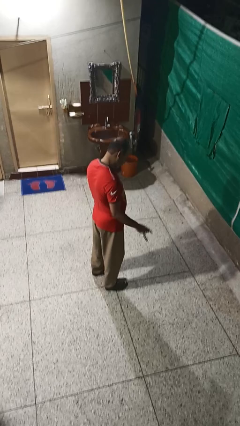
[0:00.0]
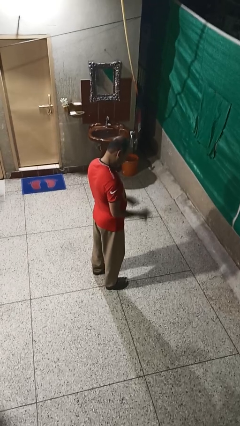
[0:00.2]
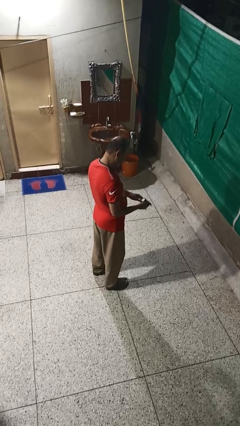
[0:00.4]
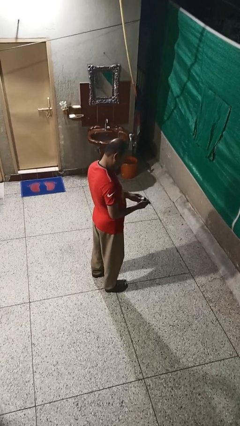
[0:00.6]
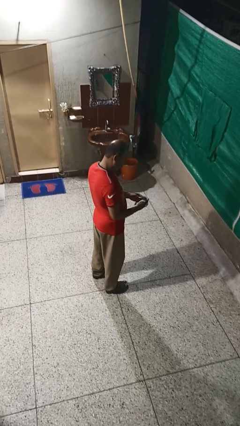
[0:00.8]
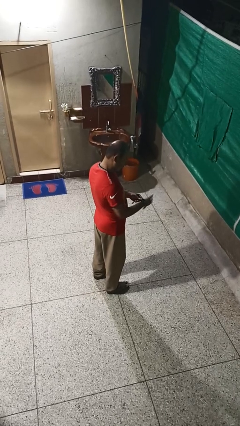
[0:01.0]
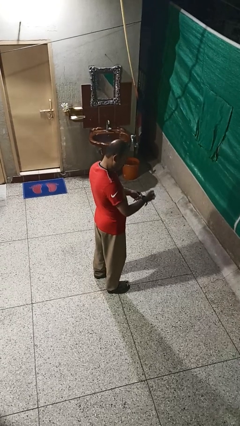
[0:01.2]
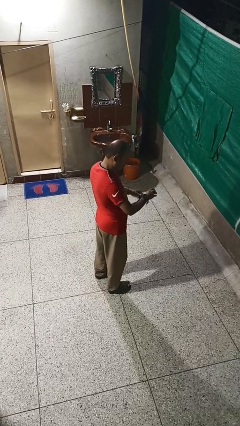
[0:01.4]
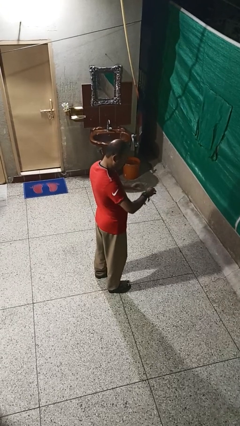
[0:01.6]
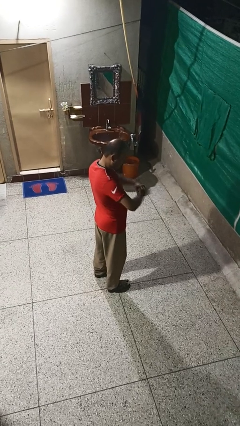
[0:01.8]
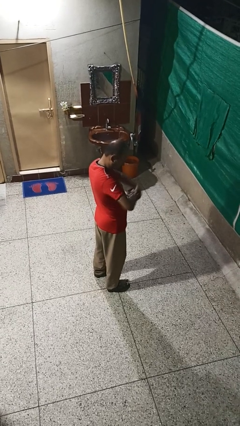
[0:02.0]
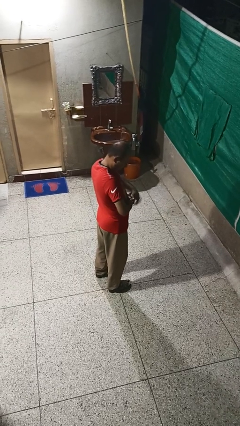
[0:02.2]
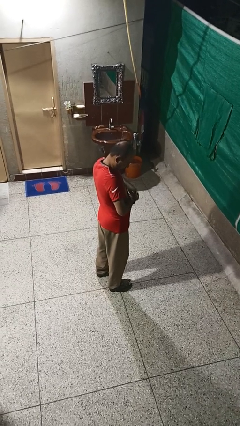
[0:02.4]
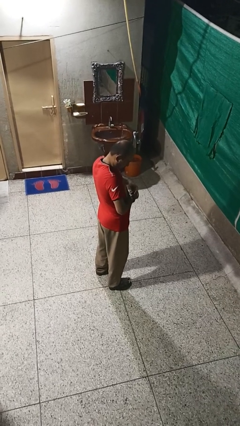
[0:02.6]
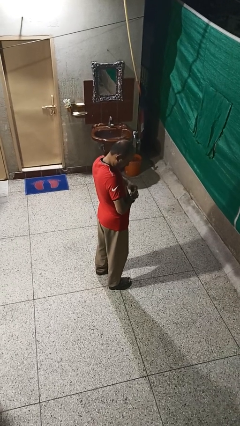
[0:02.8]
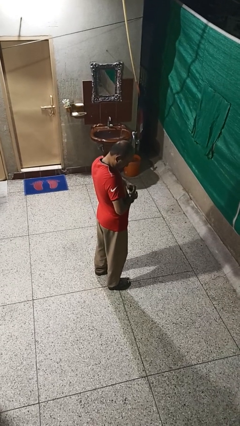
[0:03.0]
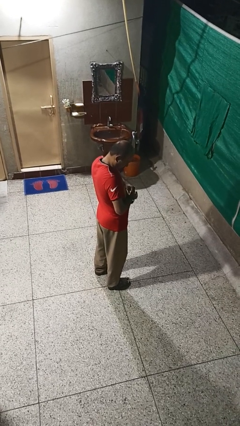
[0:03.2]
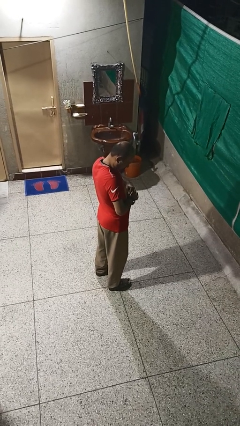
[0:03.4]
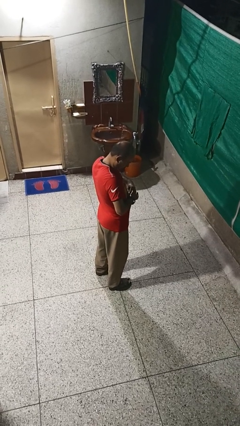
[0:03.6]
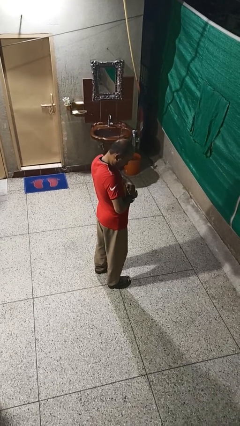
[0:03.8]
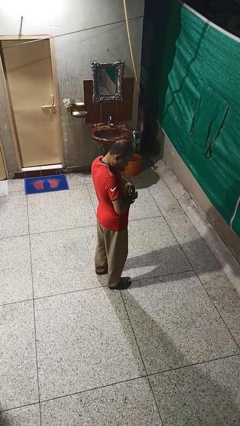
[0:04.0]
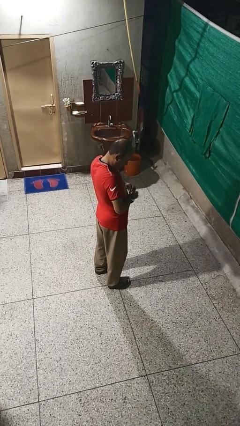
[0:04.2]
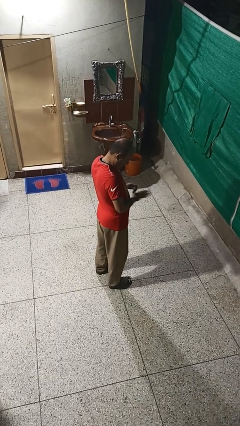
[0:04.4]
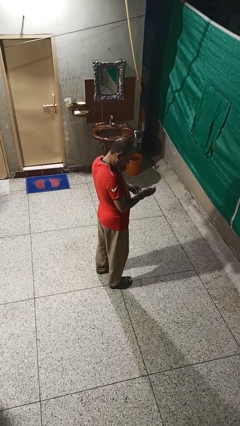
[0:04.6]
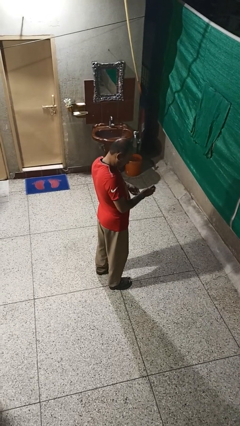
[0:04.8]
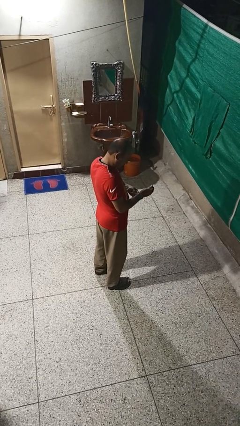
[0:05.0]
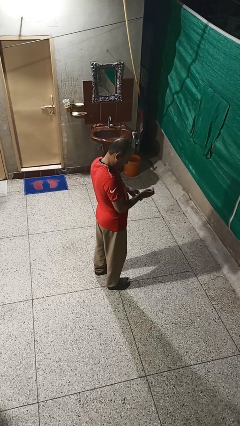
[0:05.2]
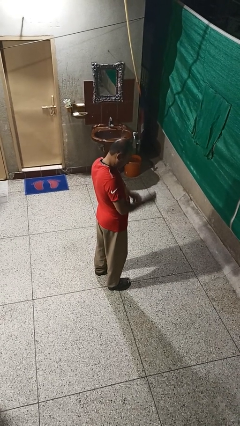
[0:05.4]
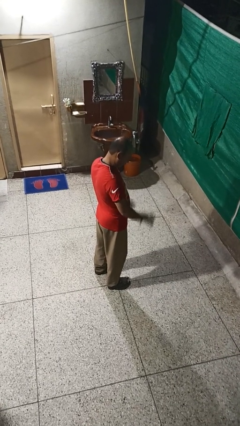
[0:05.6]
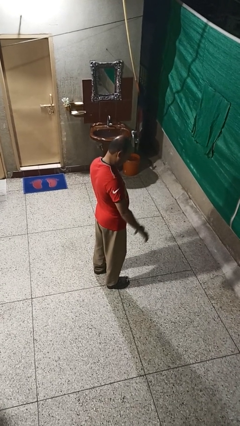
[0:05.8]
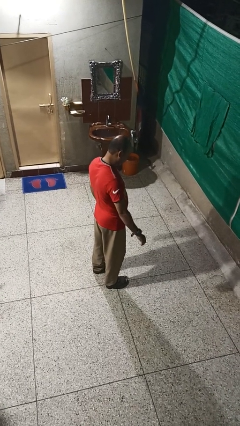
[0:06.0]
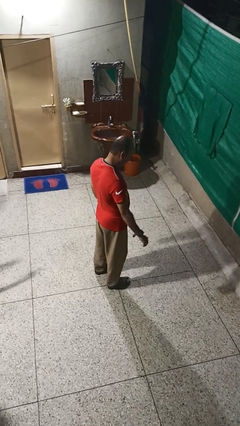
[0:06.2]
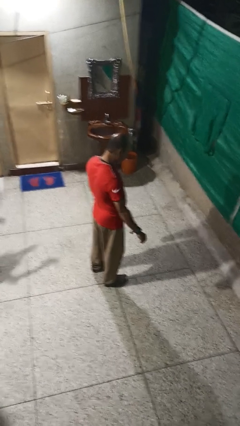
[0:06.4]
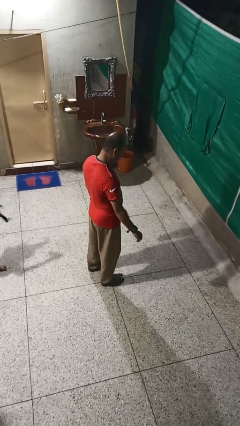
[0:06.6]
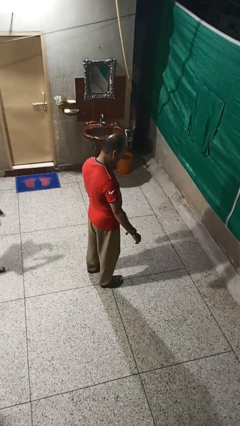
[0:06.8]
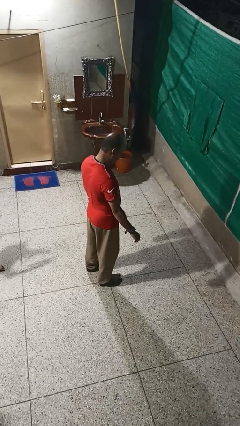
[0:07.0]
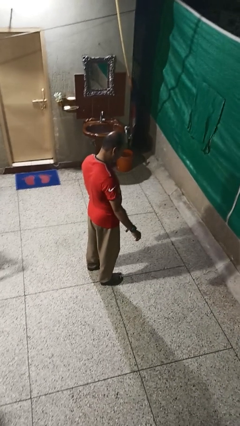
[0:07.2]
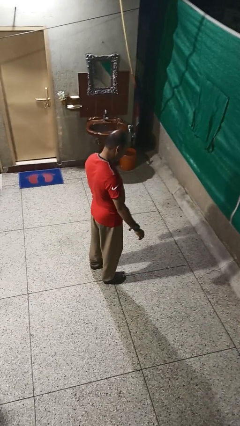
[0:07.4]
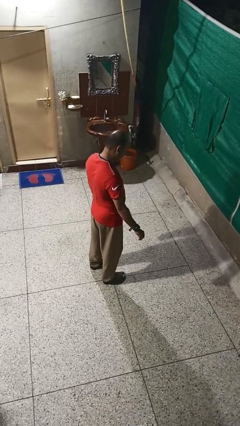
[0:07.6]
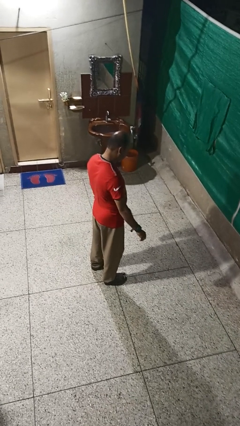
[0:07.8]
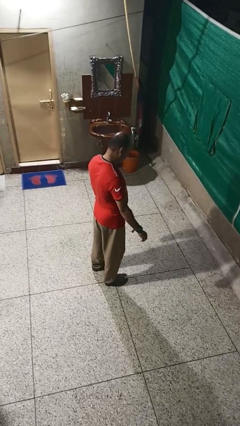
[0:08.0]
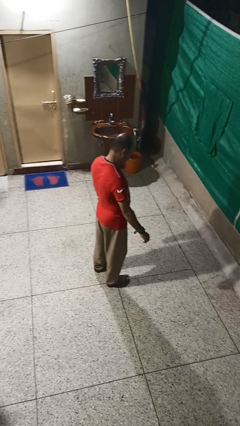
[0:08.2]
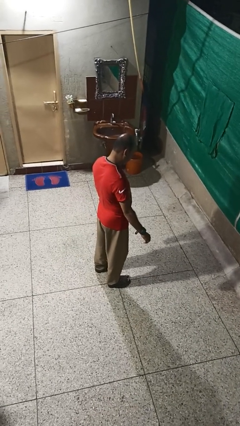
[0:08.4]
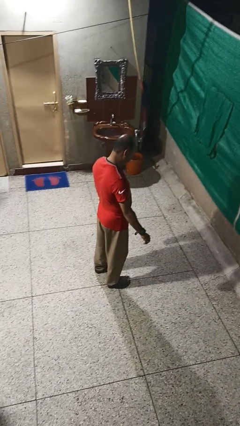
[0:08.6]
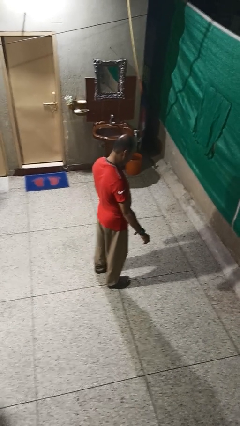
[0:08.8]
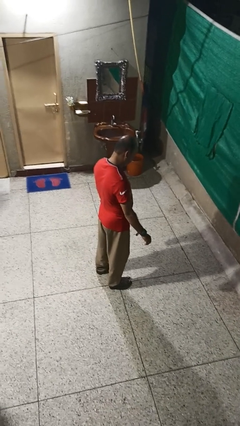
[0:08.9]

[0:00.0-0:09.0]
person puts on wristwatch

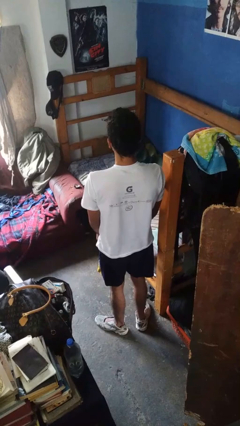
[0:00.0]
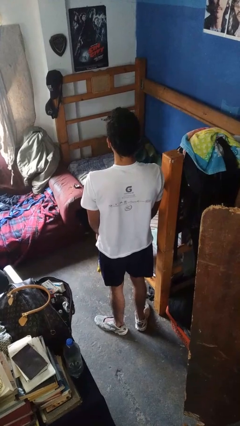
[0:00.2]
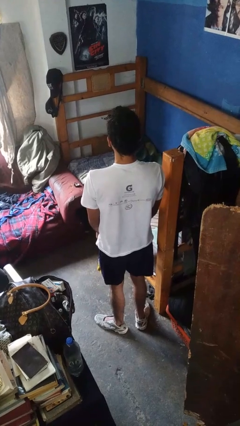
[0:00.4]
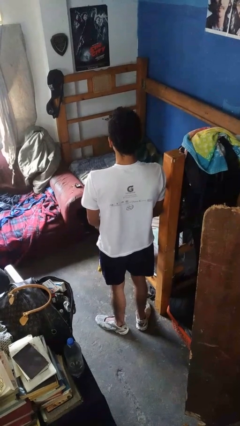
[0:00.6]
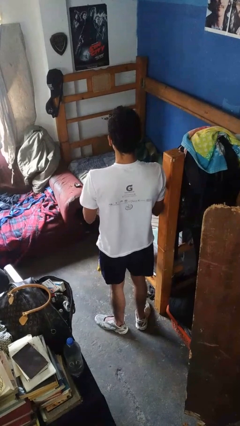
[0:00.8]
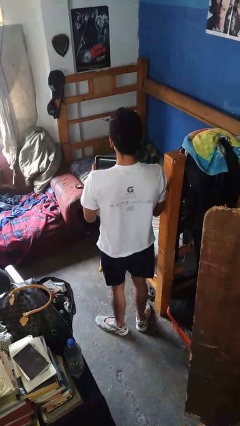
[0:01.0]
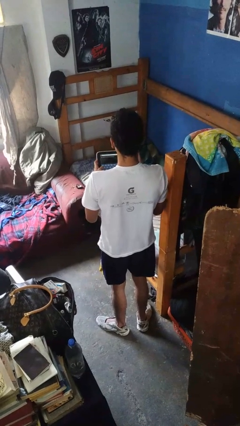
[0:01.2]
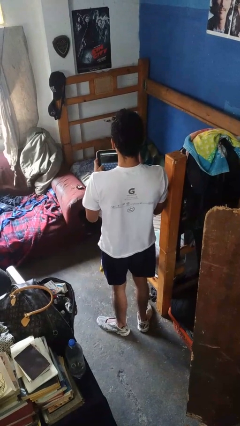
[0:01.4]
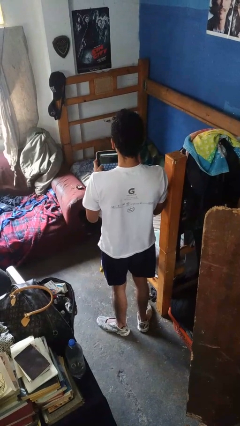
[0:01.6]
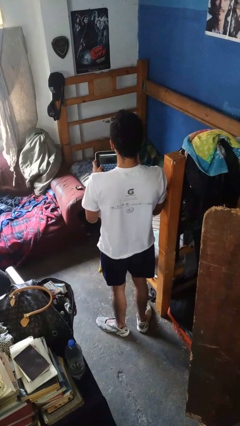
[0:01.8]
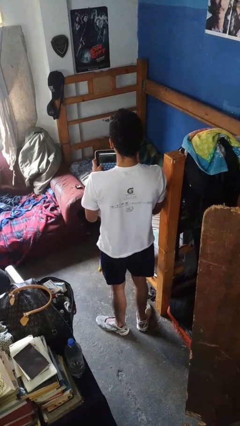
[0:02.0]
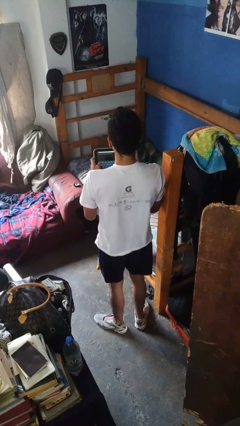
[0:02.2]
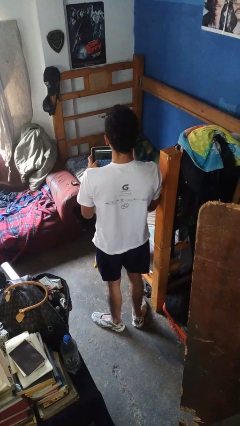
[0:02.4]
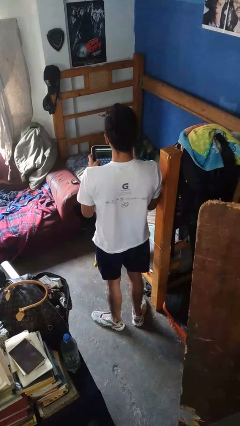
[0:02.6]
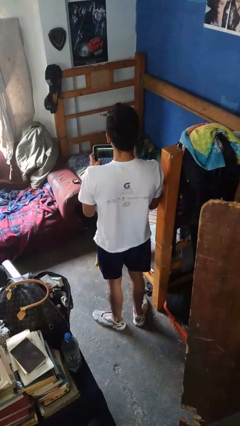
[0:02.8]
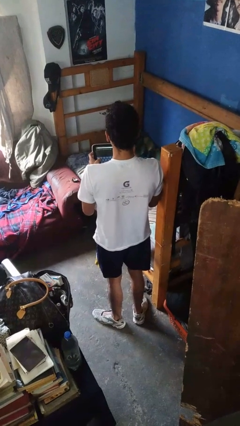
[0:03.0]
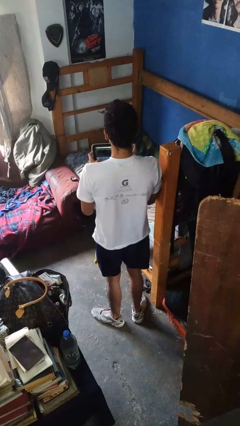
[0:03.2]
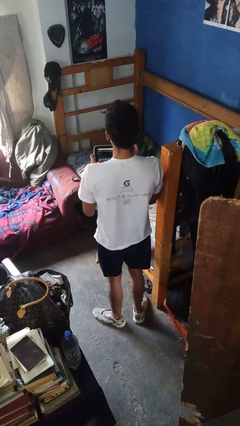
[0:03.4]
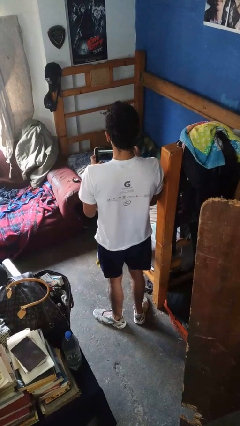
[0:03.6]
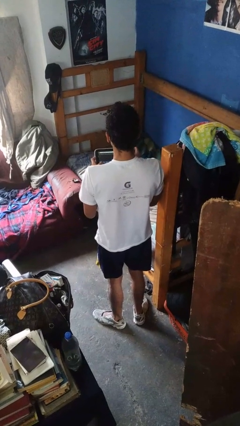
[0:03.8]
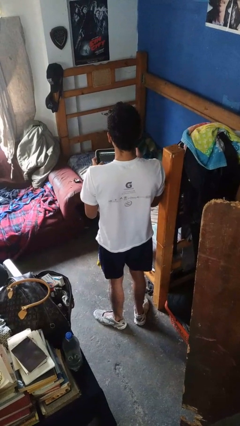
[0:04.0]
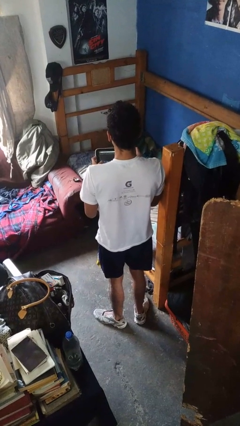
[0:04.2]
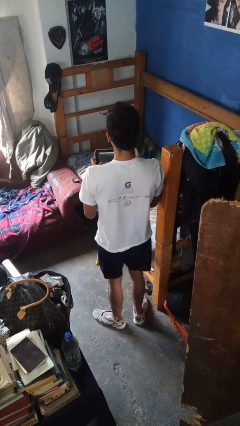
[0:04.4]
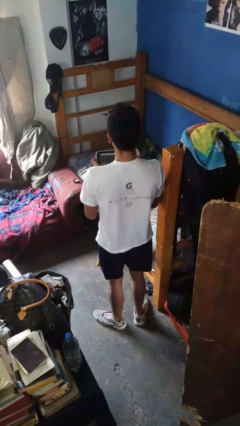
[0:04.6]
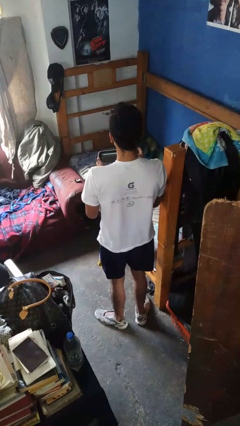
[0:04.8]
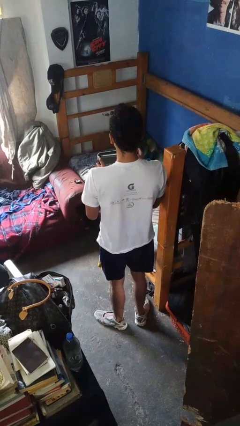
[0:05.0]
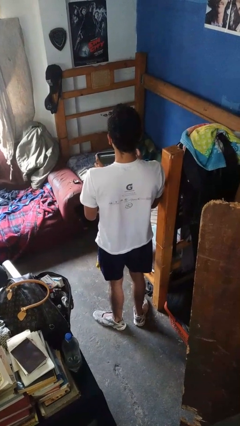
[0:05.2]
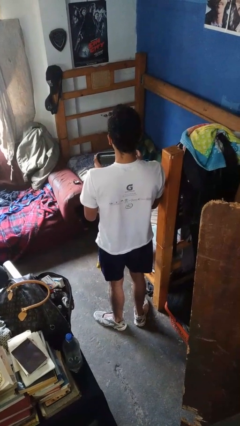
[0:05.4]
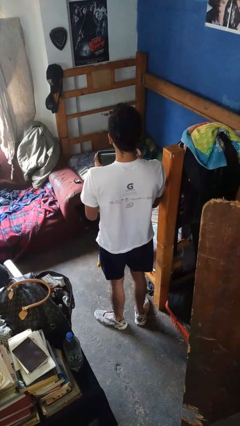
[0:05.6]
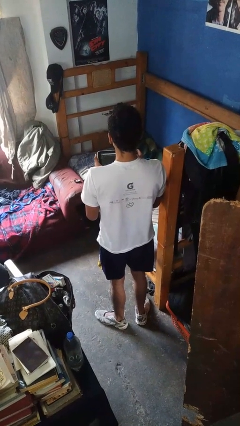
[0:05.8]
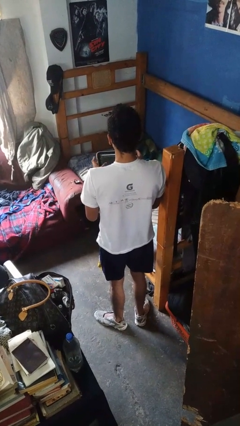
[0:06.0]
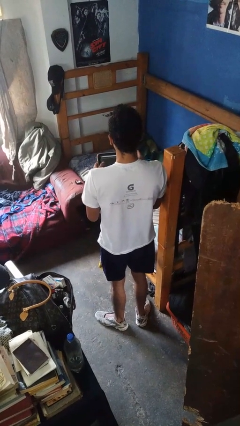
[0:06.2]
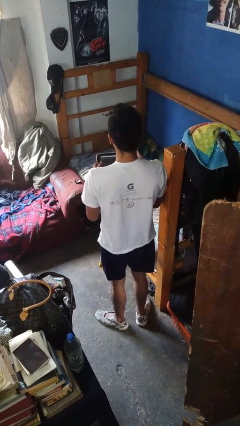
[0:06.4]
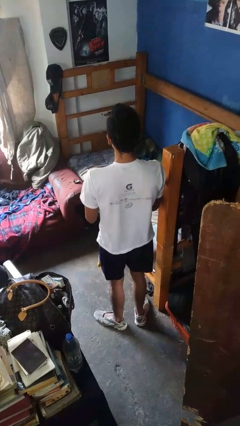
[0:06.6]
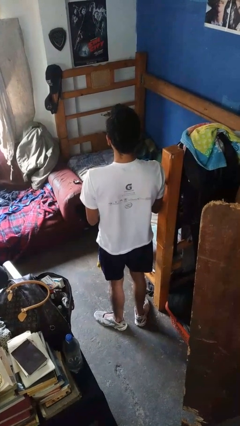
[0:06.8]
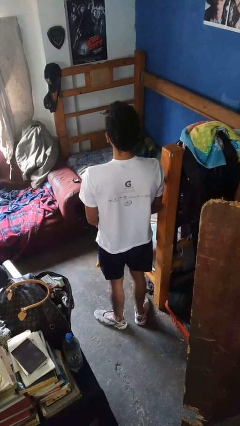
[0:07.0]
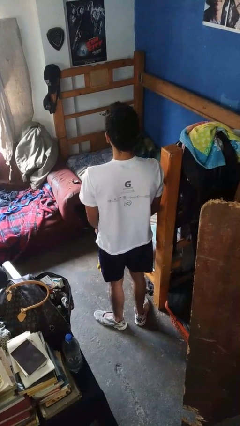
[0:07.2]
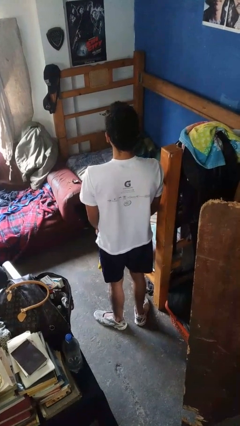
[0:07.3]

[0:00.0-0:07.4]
person interacts with tablet

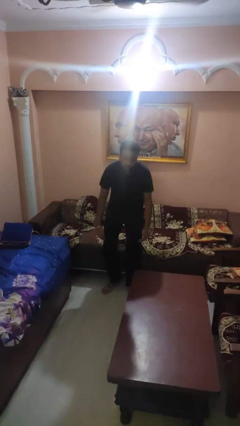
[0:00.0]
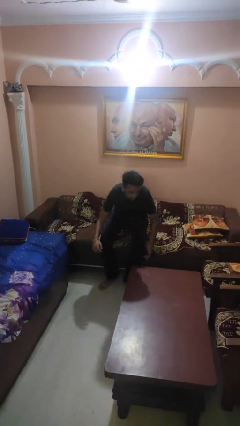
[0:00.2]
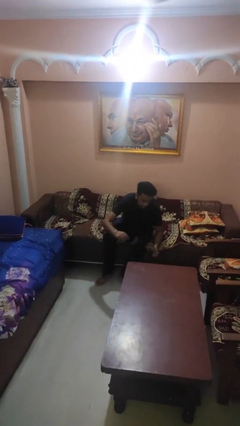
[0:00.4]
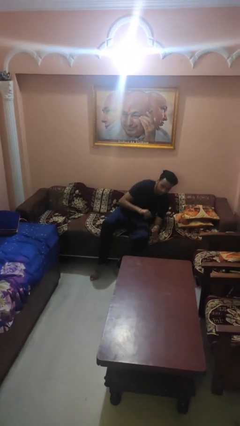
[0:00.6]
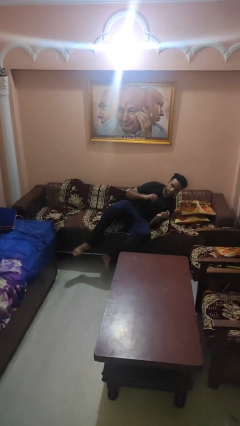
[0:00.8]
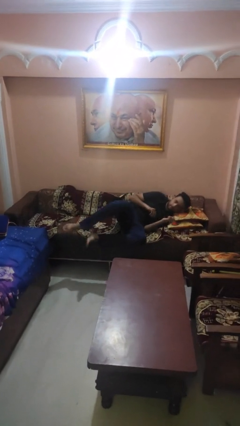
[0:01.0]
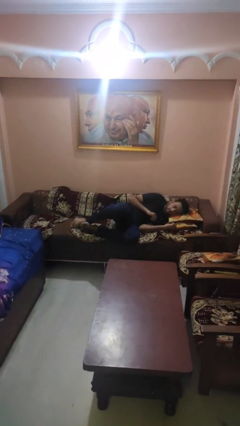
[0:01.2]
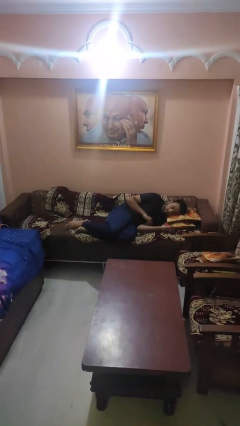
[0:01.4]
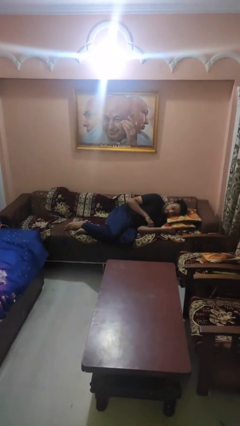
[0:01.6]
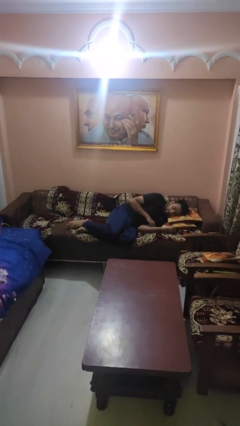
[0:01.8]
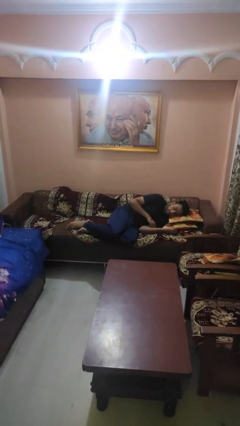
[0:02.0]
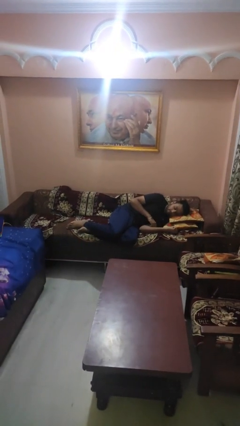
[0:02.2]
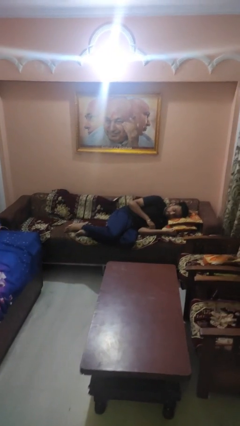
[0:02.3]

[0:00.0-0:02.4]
person lies down on couch
